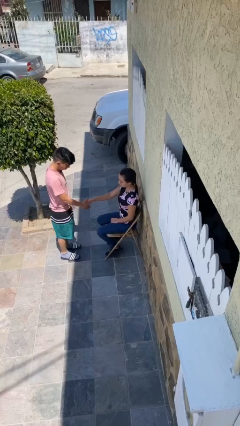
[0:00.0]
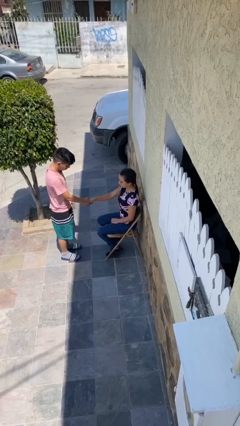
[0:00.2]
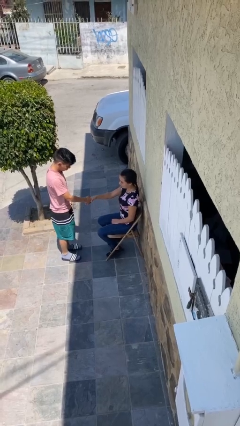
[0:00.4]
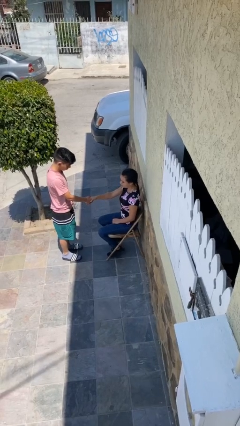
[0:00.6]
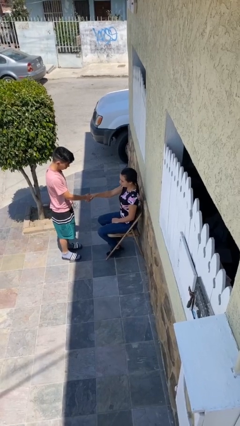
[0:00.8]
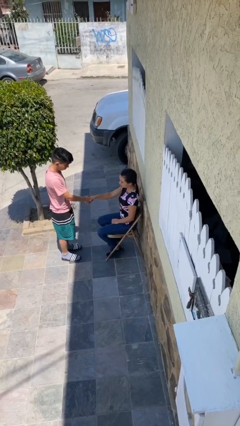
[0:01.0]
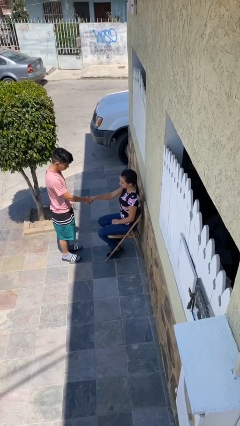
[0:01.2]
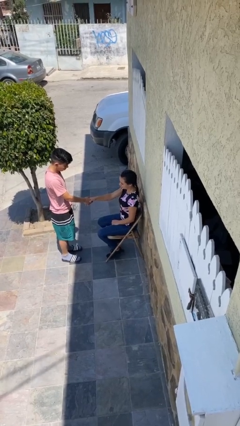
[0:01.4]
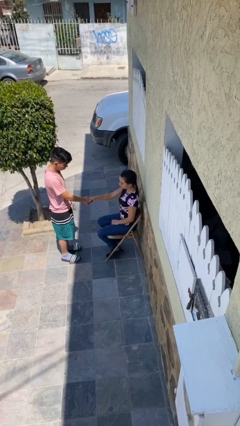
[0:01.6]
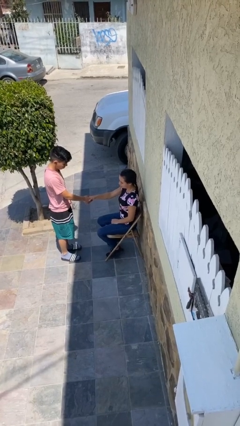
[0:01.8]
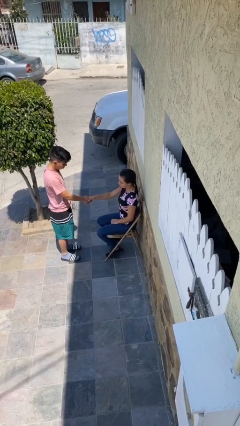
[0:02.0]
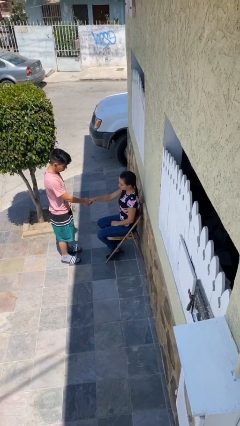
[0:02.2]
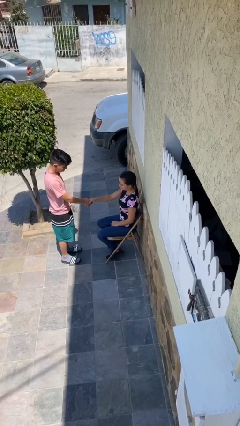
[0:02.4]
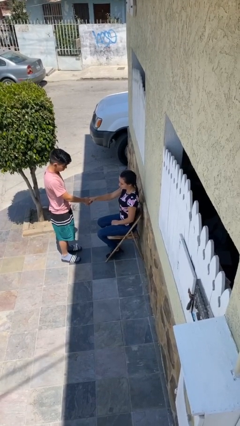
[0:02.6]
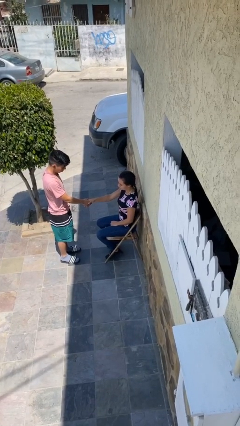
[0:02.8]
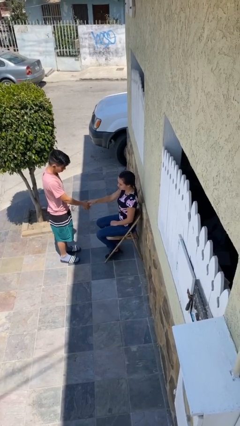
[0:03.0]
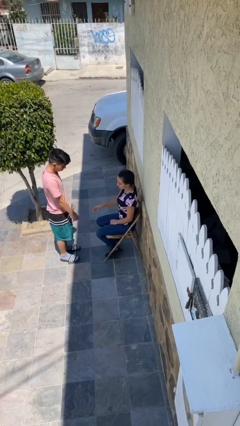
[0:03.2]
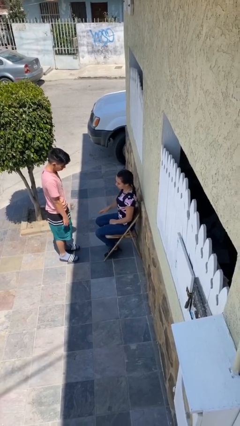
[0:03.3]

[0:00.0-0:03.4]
person shakes hand

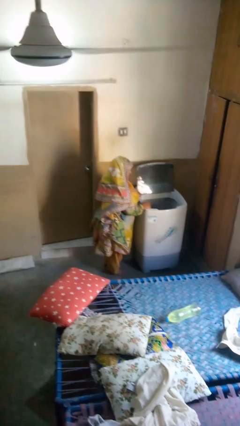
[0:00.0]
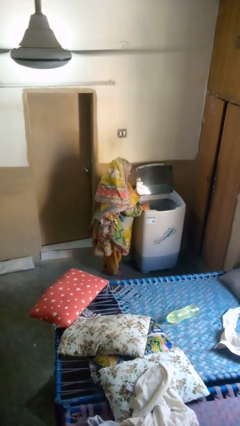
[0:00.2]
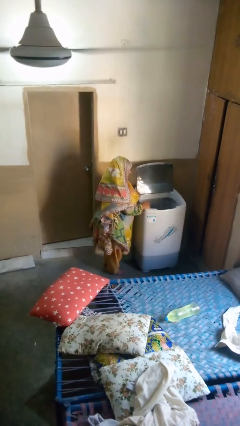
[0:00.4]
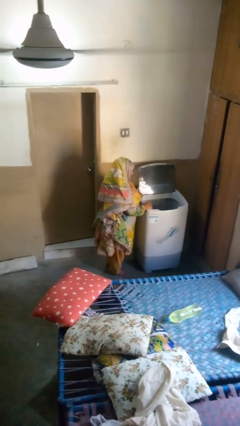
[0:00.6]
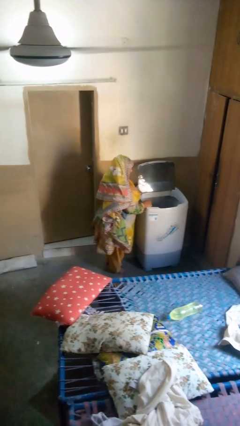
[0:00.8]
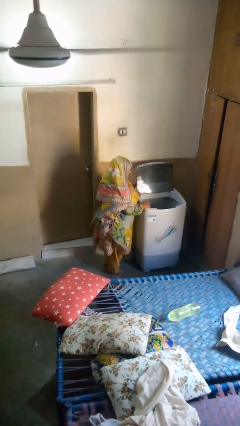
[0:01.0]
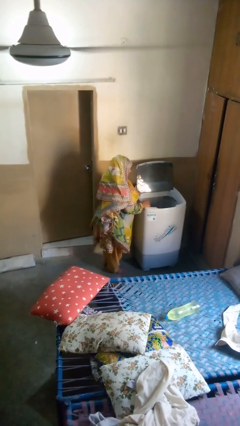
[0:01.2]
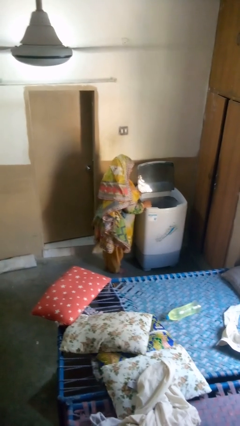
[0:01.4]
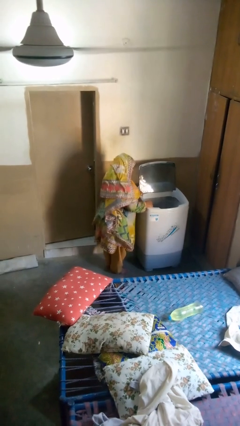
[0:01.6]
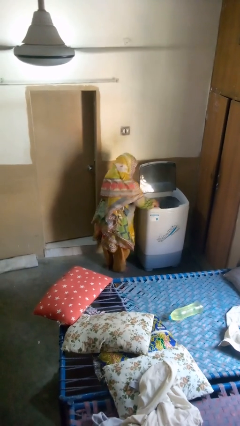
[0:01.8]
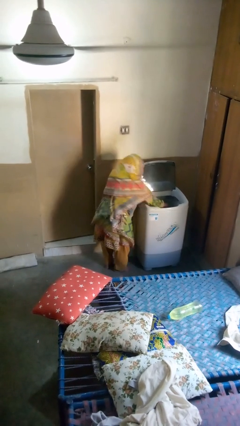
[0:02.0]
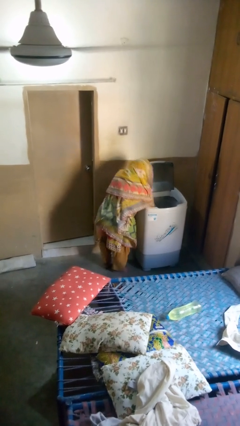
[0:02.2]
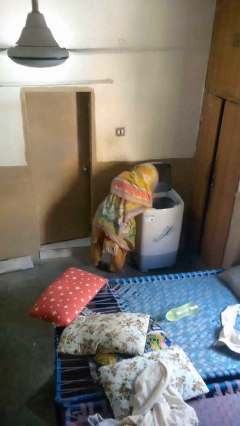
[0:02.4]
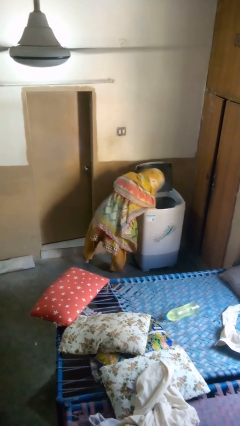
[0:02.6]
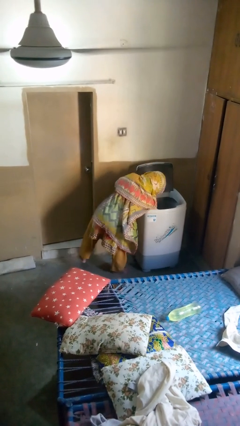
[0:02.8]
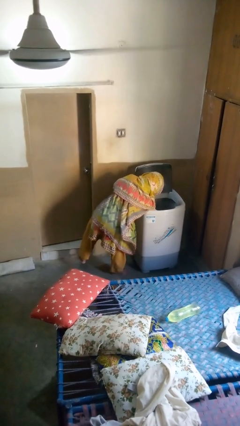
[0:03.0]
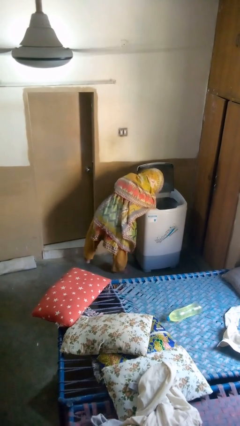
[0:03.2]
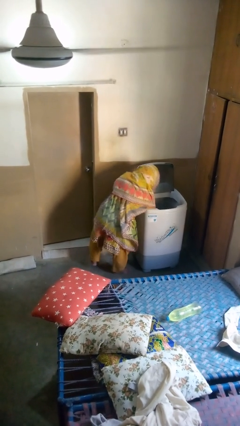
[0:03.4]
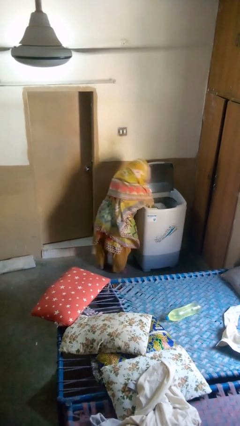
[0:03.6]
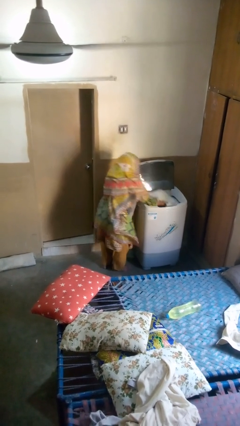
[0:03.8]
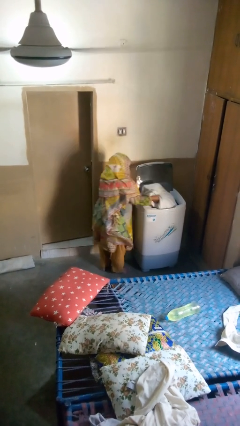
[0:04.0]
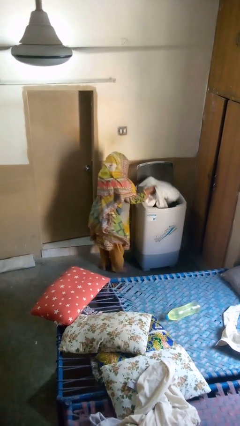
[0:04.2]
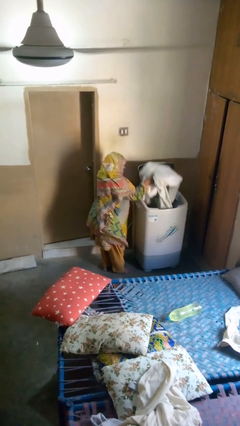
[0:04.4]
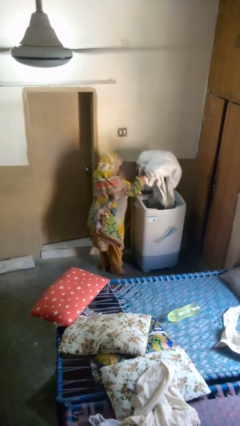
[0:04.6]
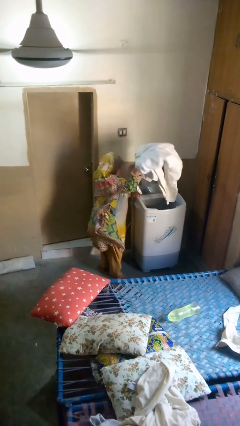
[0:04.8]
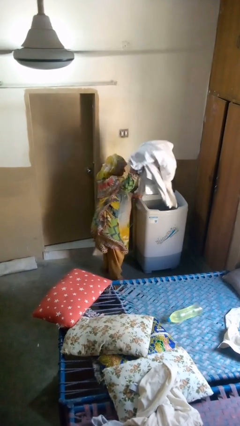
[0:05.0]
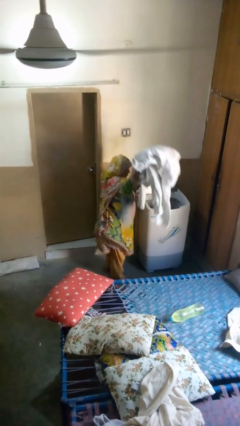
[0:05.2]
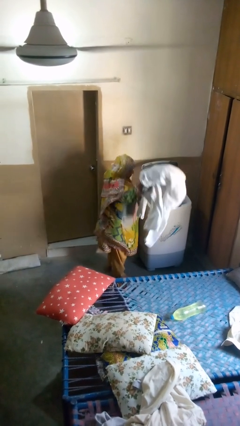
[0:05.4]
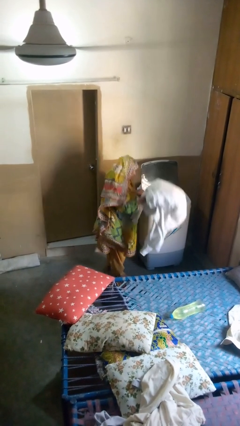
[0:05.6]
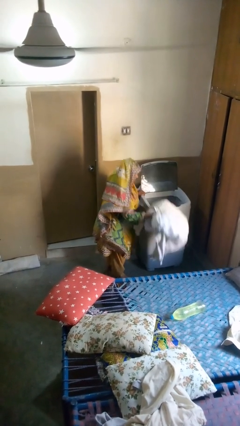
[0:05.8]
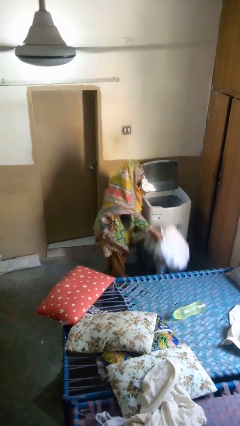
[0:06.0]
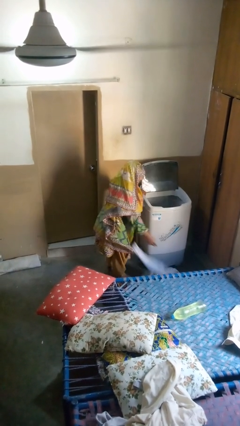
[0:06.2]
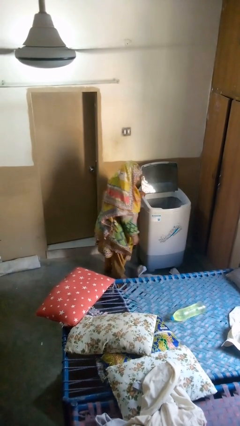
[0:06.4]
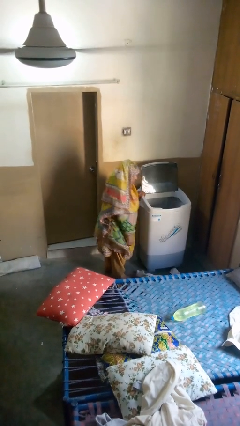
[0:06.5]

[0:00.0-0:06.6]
person unloads clotheswasher

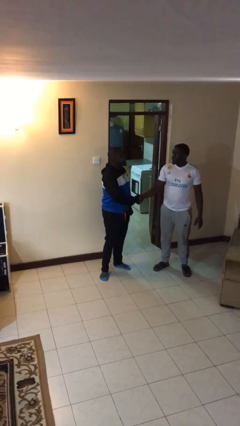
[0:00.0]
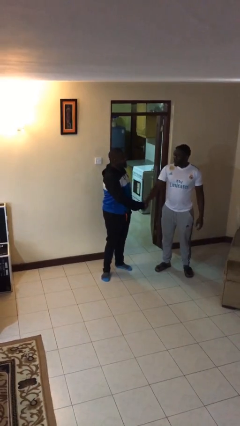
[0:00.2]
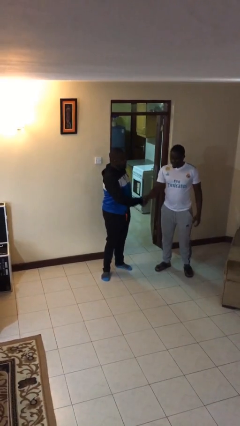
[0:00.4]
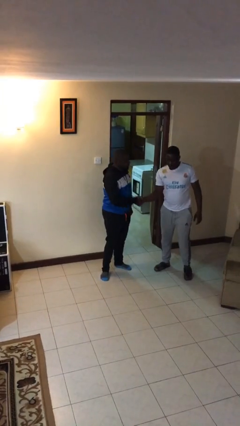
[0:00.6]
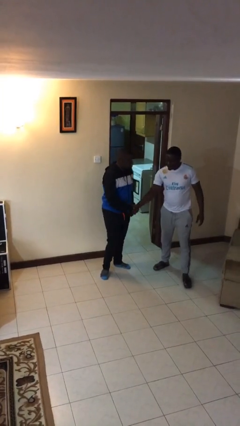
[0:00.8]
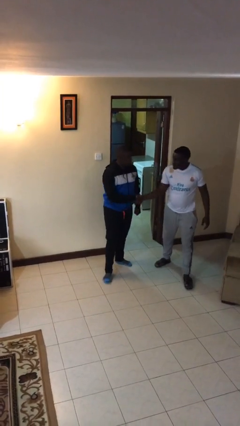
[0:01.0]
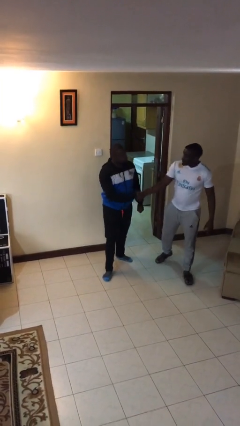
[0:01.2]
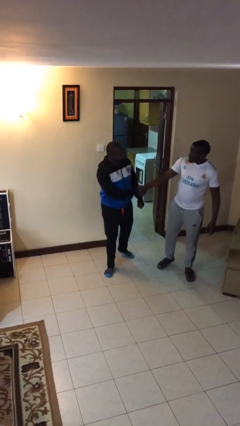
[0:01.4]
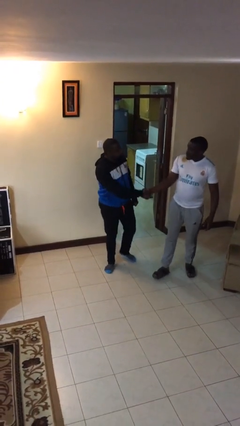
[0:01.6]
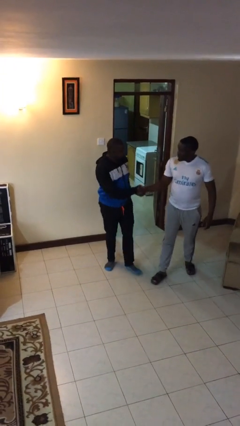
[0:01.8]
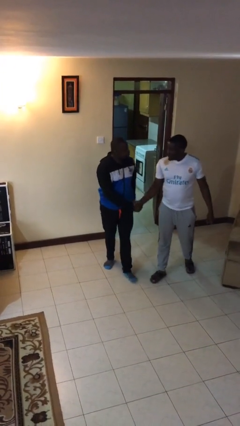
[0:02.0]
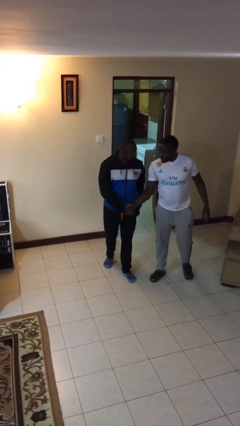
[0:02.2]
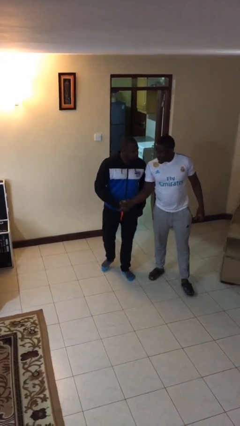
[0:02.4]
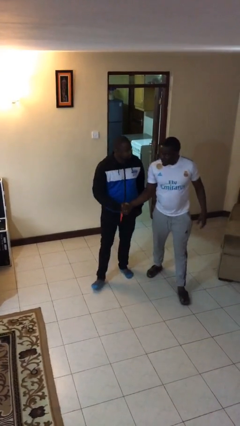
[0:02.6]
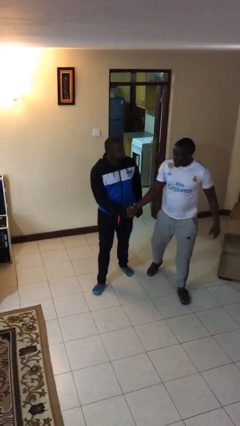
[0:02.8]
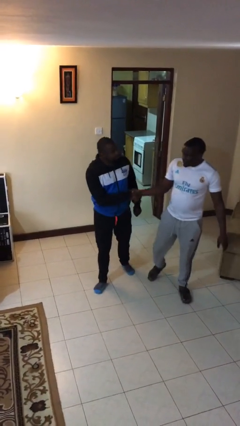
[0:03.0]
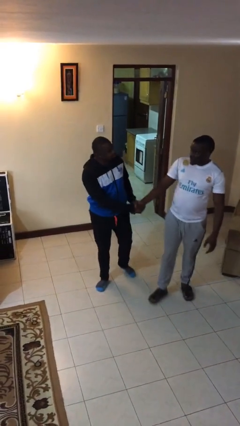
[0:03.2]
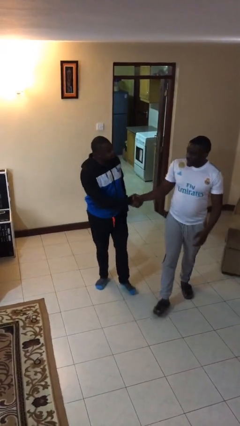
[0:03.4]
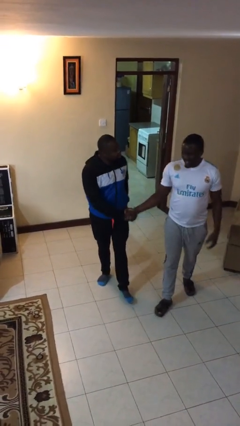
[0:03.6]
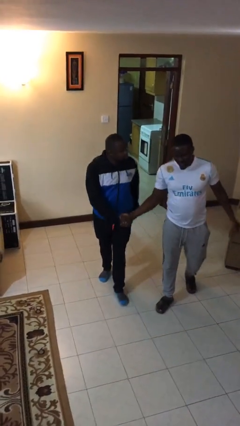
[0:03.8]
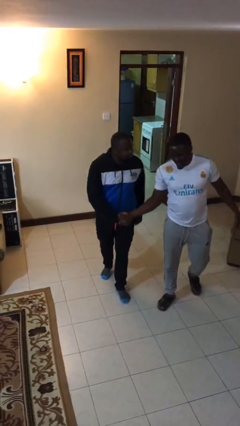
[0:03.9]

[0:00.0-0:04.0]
person holds hand

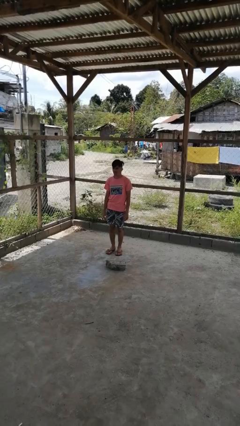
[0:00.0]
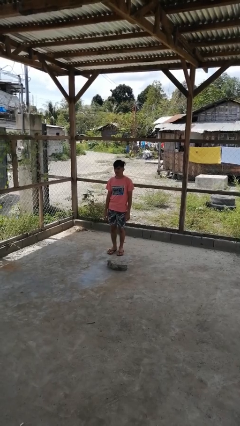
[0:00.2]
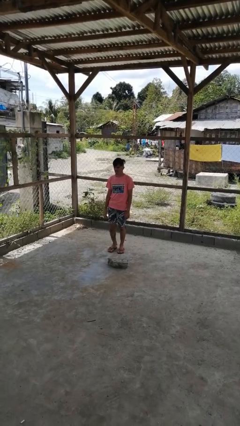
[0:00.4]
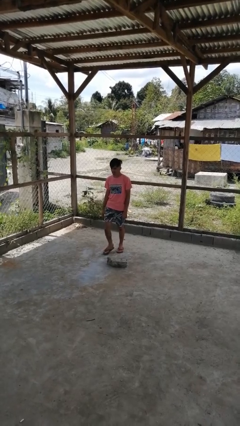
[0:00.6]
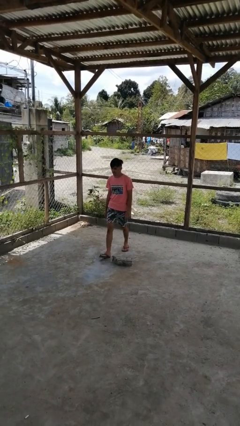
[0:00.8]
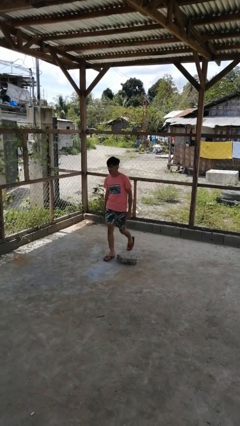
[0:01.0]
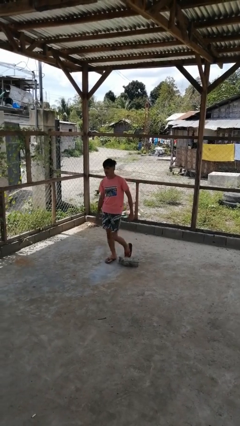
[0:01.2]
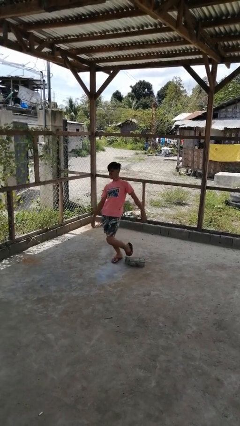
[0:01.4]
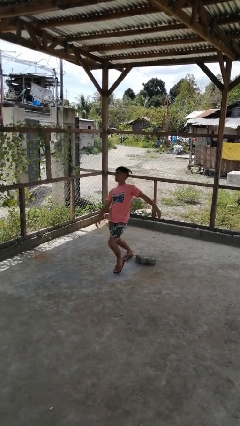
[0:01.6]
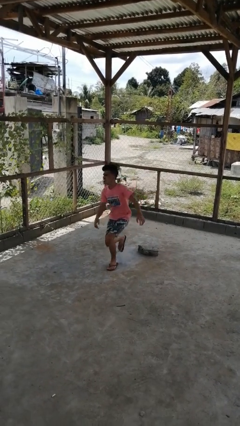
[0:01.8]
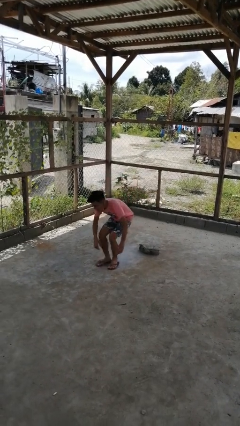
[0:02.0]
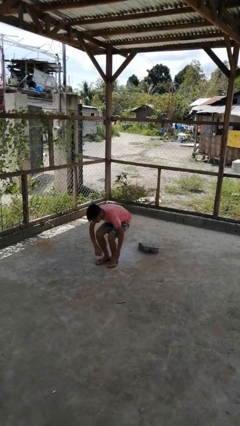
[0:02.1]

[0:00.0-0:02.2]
person trips on object on floor

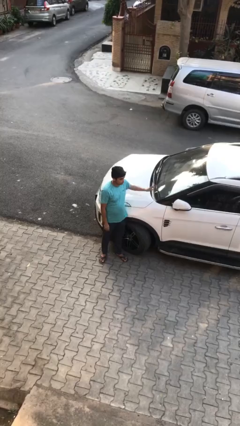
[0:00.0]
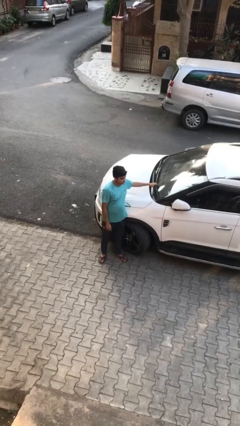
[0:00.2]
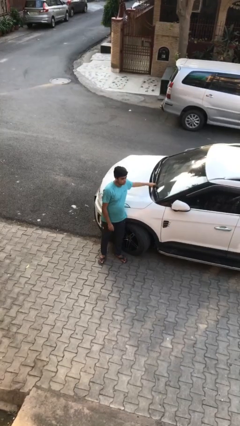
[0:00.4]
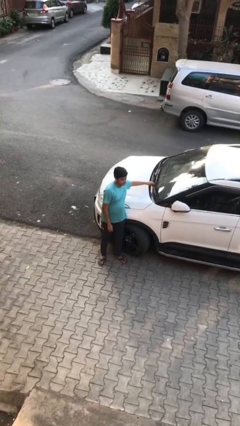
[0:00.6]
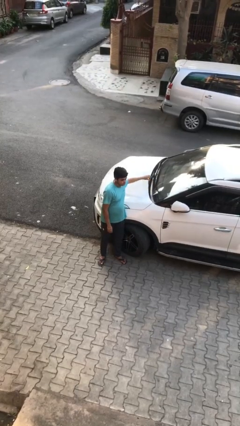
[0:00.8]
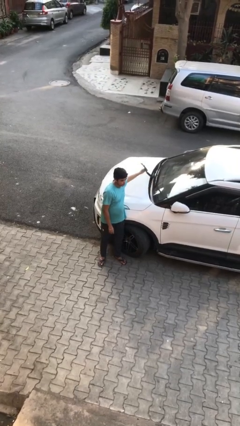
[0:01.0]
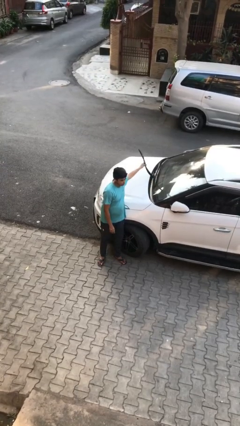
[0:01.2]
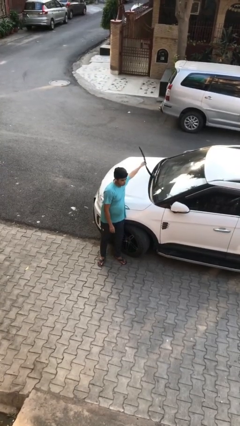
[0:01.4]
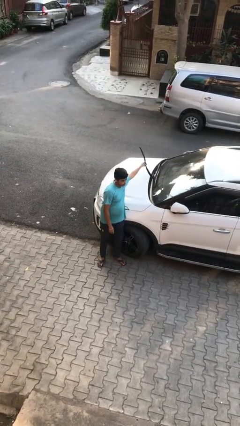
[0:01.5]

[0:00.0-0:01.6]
person flips up car wipers
